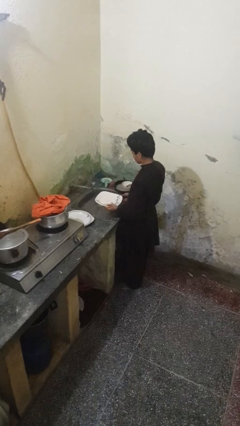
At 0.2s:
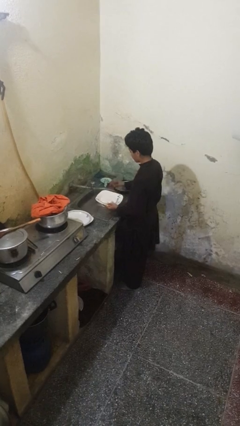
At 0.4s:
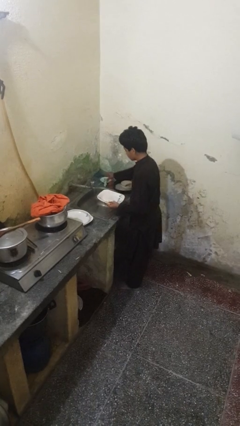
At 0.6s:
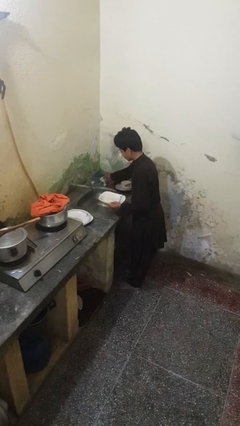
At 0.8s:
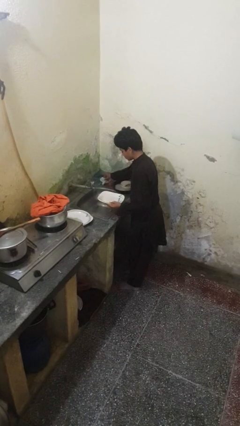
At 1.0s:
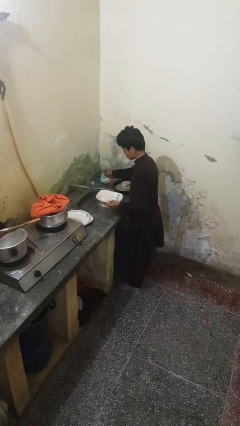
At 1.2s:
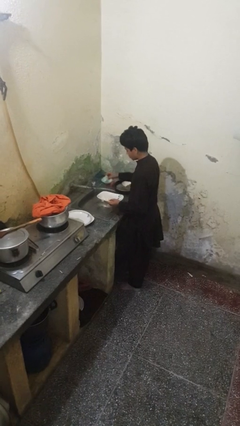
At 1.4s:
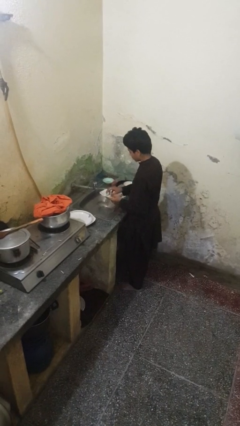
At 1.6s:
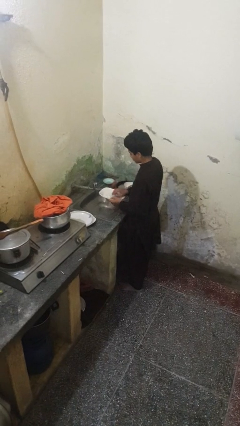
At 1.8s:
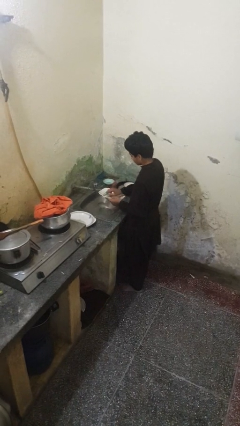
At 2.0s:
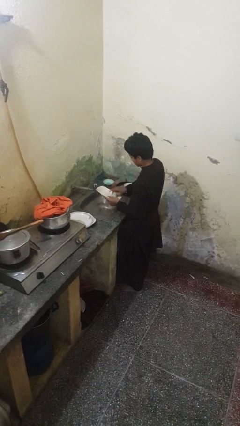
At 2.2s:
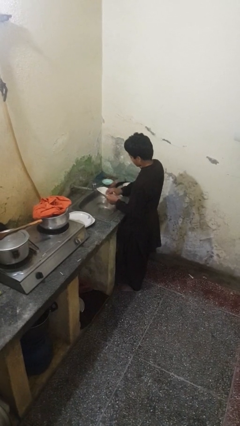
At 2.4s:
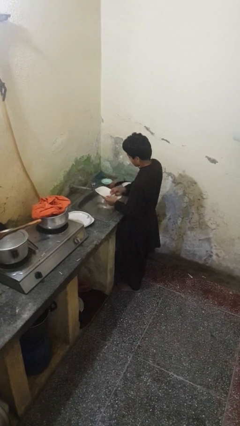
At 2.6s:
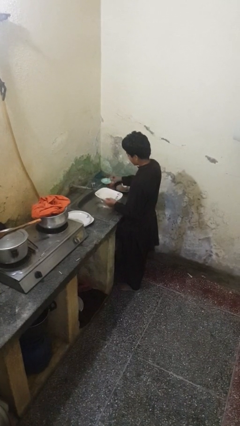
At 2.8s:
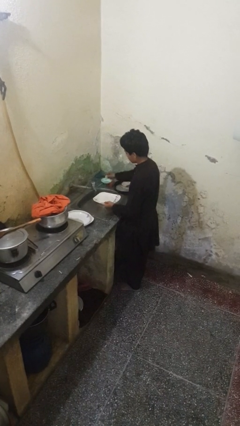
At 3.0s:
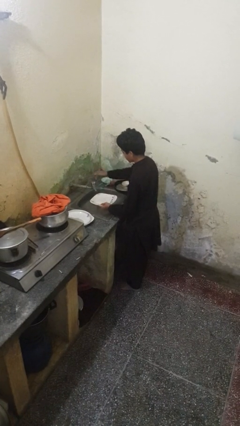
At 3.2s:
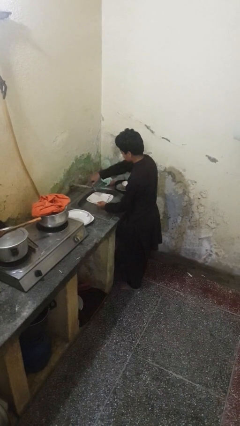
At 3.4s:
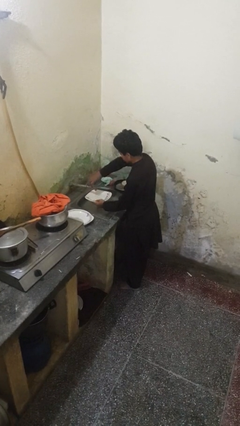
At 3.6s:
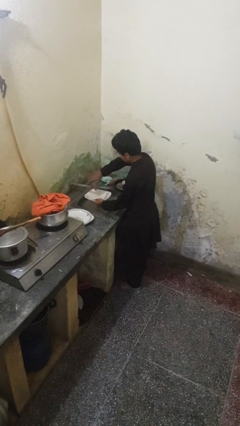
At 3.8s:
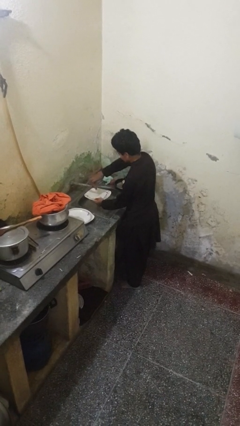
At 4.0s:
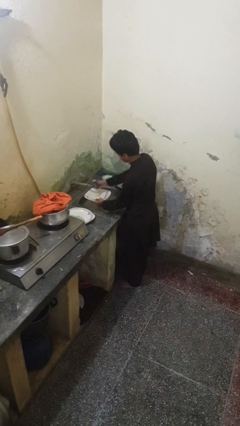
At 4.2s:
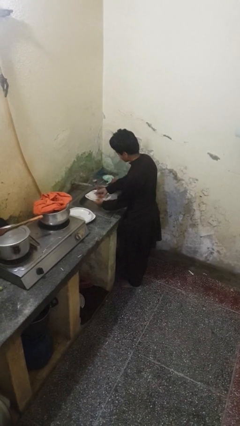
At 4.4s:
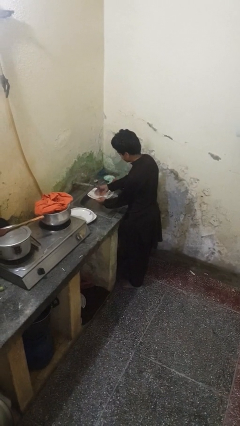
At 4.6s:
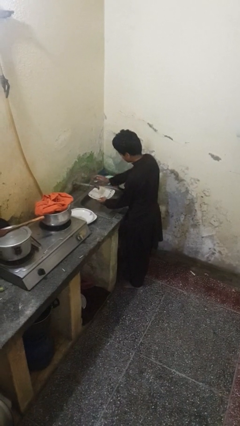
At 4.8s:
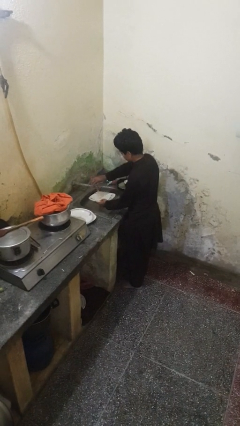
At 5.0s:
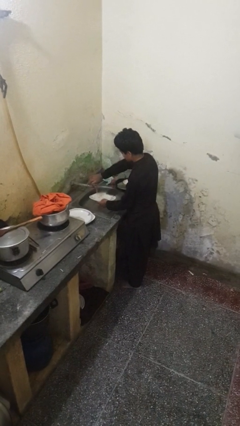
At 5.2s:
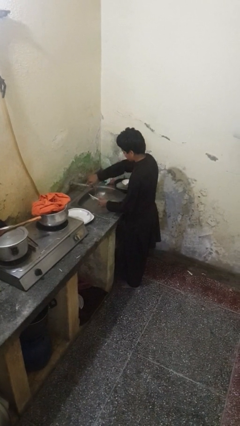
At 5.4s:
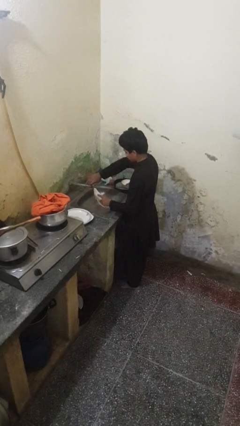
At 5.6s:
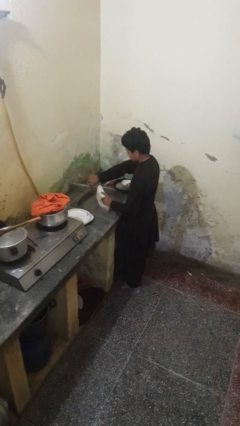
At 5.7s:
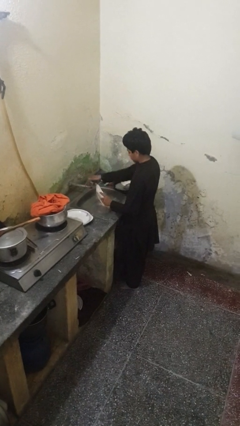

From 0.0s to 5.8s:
person washes dish

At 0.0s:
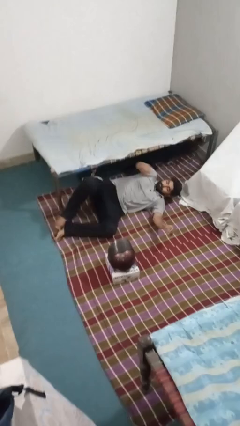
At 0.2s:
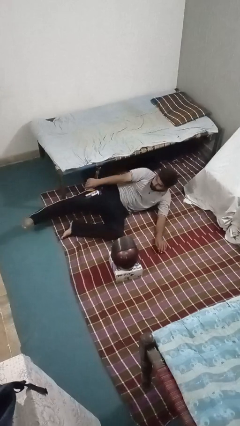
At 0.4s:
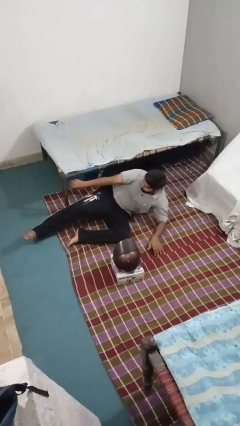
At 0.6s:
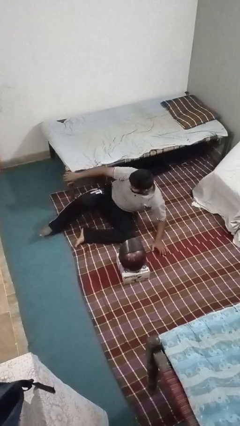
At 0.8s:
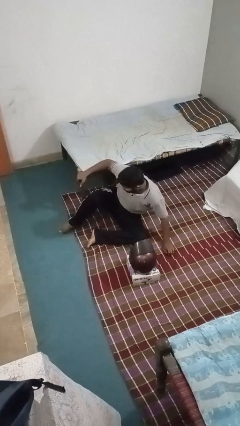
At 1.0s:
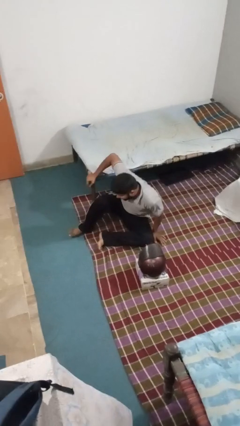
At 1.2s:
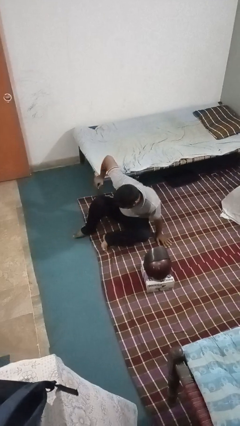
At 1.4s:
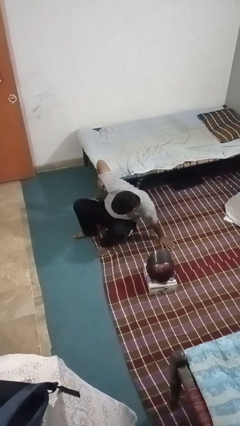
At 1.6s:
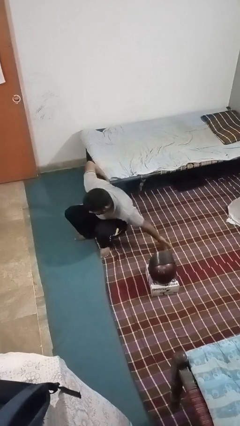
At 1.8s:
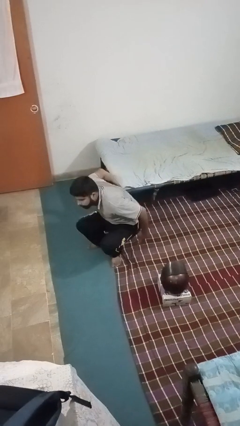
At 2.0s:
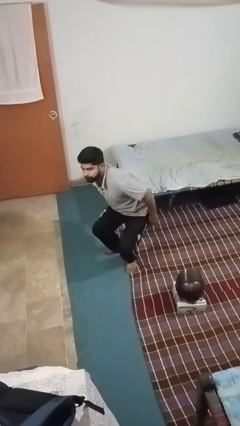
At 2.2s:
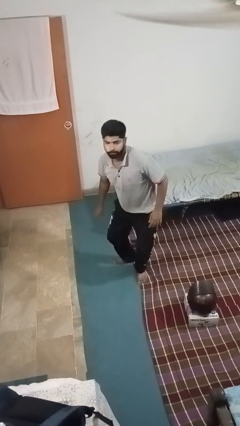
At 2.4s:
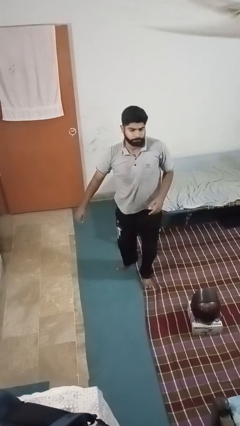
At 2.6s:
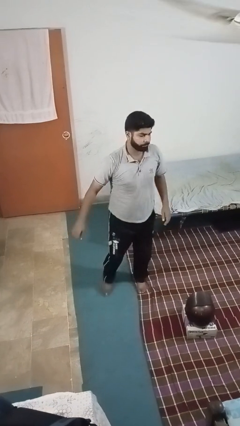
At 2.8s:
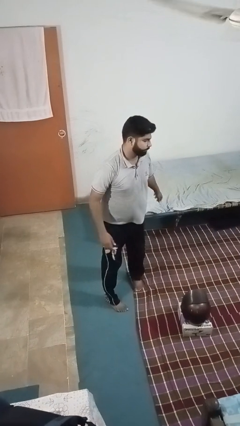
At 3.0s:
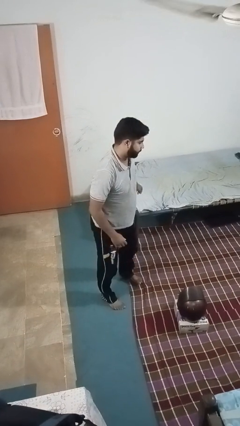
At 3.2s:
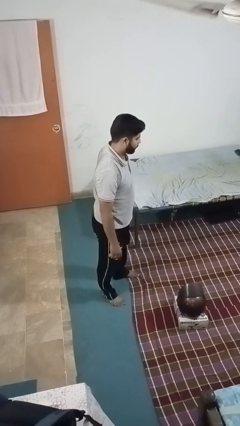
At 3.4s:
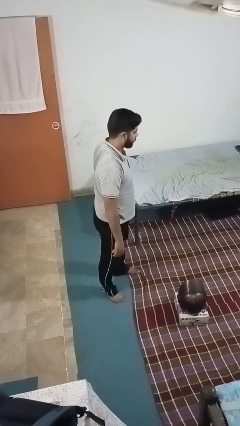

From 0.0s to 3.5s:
person stands up from floor

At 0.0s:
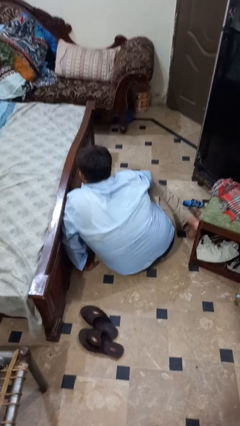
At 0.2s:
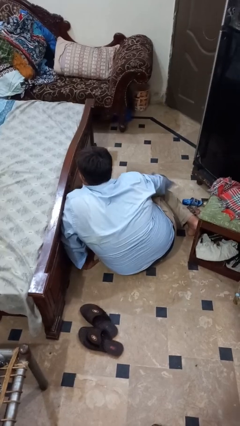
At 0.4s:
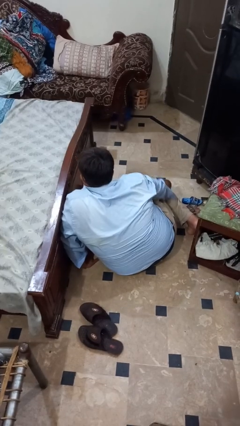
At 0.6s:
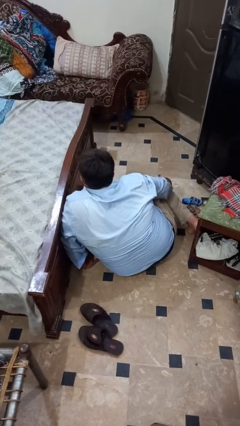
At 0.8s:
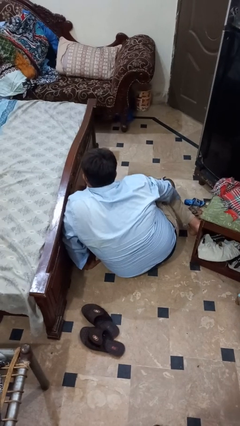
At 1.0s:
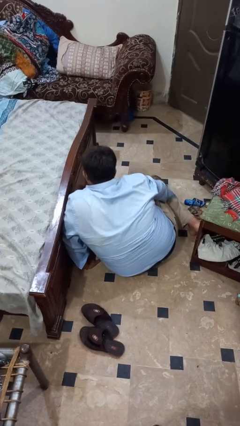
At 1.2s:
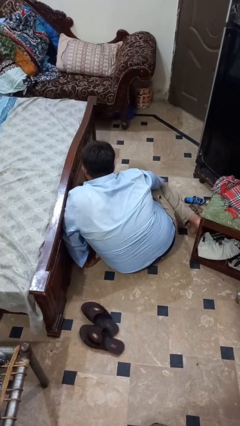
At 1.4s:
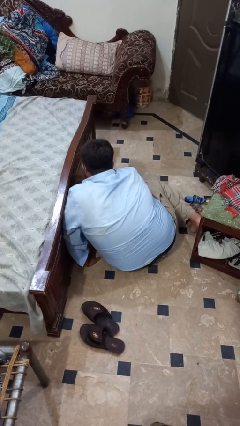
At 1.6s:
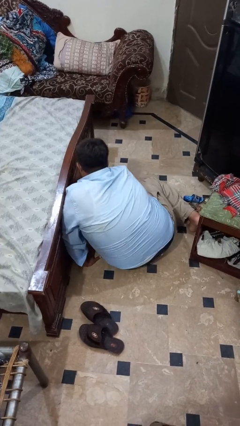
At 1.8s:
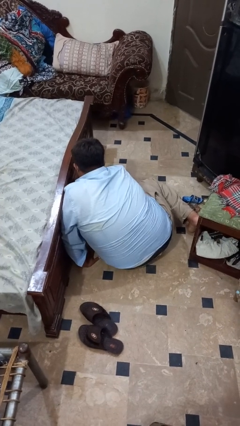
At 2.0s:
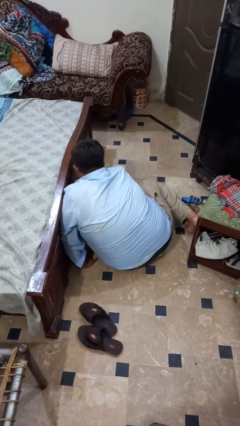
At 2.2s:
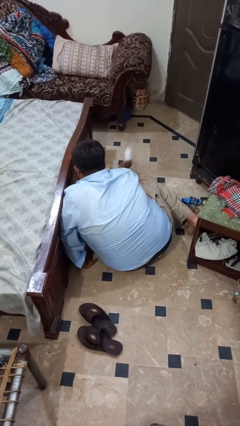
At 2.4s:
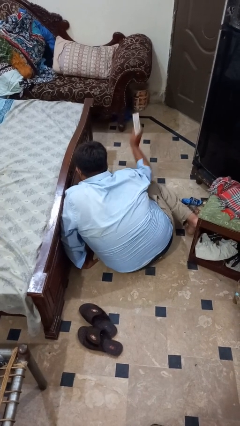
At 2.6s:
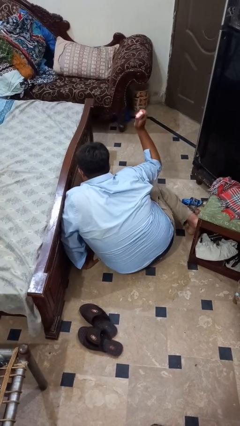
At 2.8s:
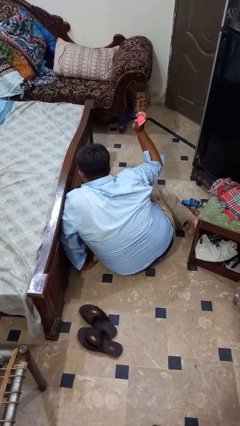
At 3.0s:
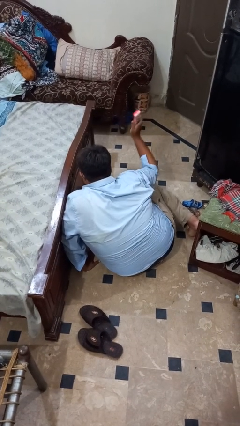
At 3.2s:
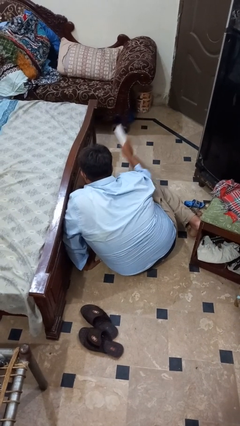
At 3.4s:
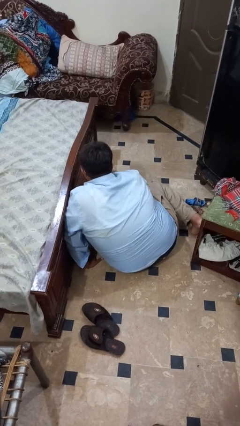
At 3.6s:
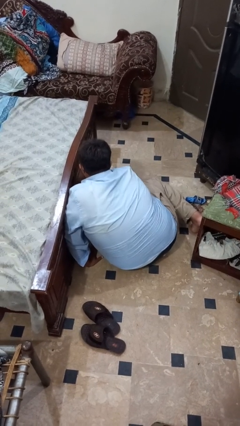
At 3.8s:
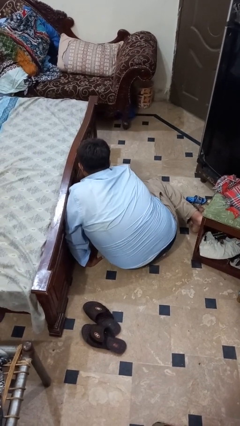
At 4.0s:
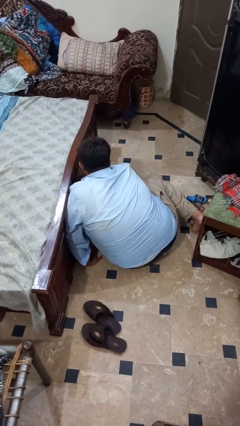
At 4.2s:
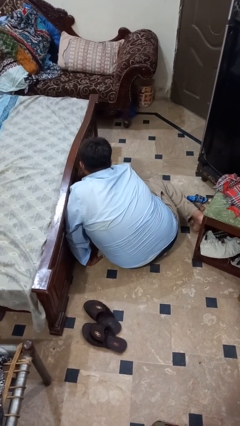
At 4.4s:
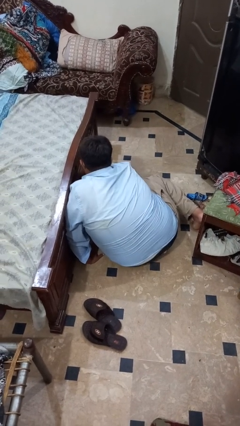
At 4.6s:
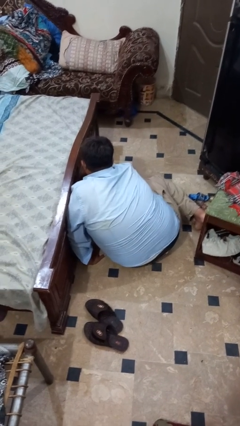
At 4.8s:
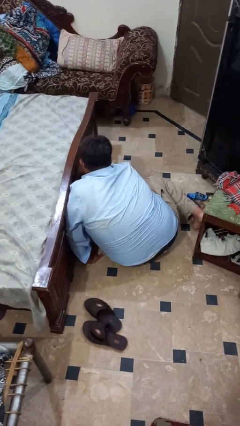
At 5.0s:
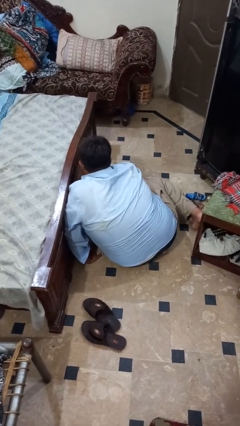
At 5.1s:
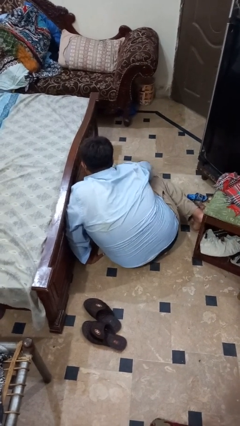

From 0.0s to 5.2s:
person searches under bed

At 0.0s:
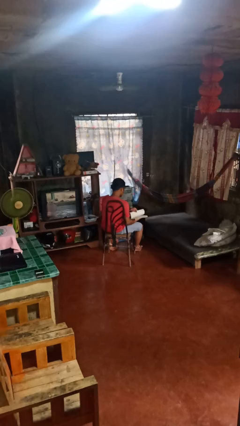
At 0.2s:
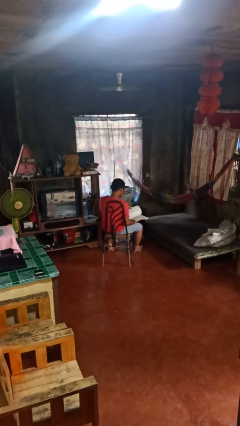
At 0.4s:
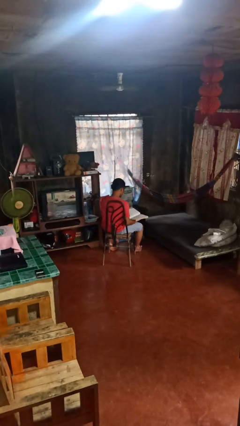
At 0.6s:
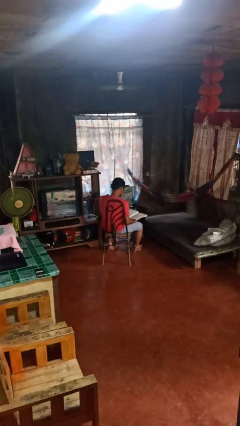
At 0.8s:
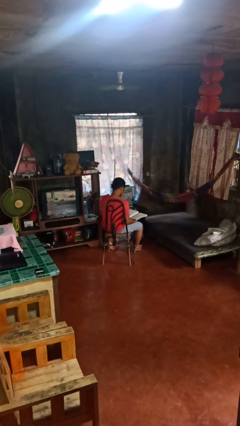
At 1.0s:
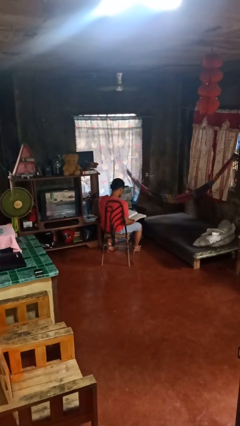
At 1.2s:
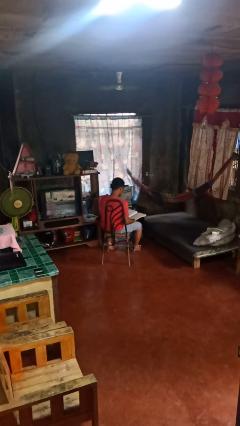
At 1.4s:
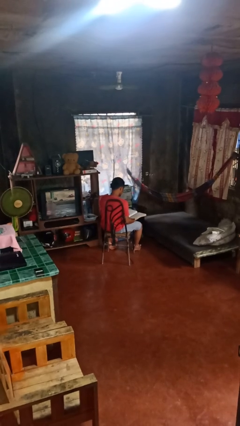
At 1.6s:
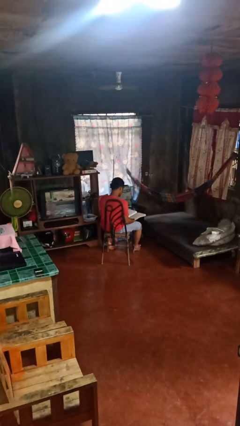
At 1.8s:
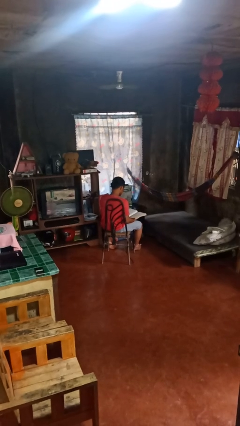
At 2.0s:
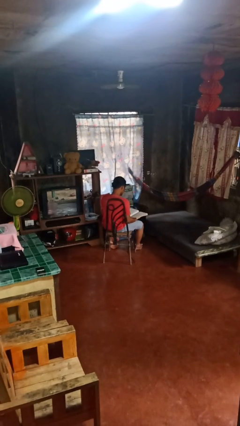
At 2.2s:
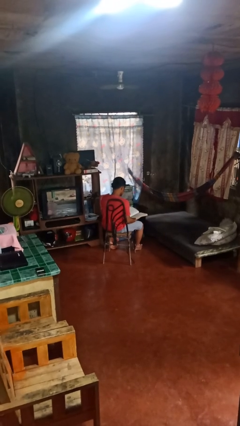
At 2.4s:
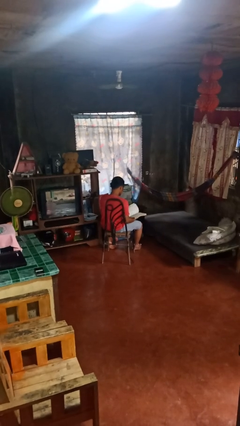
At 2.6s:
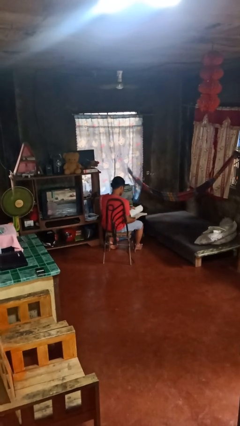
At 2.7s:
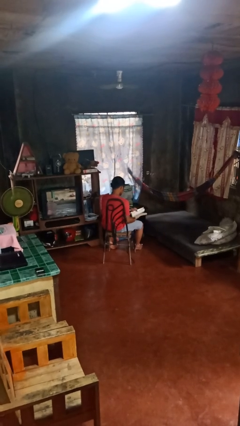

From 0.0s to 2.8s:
person reads book

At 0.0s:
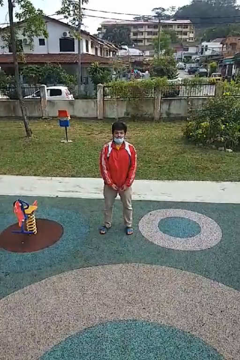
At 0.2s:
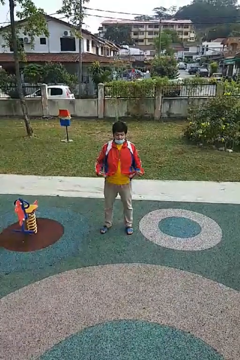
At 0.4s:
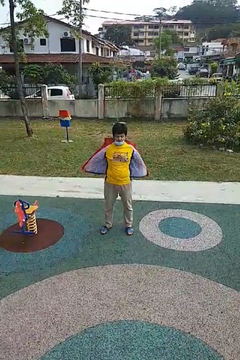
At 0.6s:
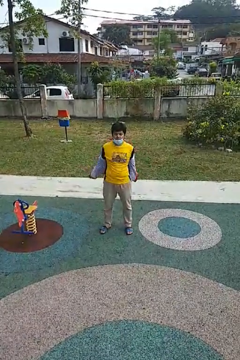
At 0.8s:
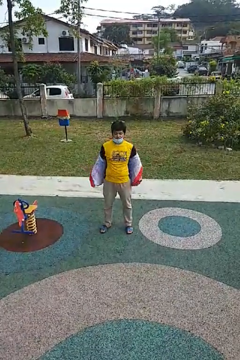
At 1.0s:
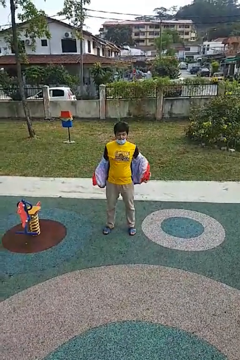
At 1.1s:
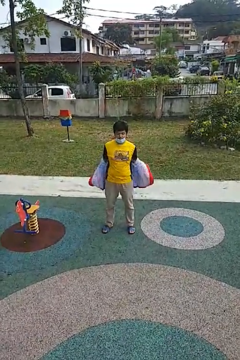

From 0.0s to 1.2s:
person takes off jacket
